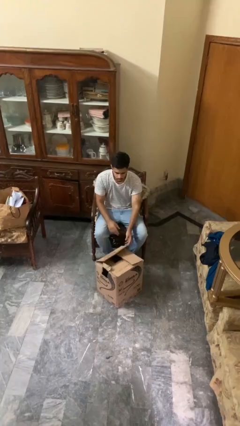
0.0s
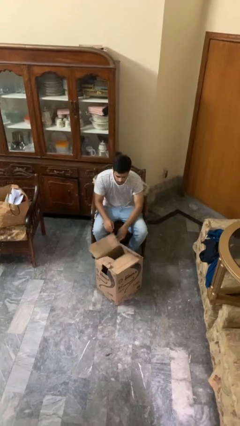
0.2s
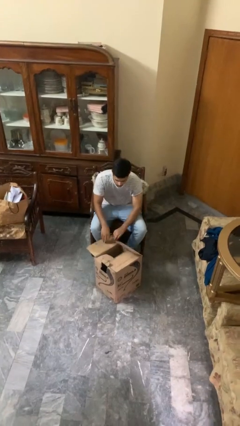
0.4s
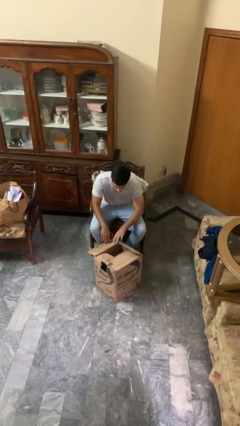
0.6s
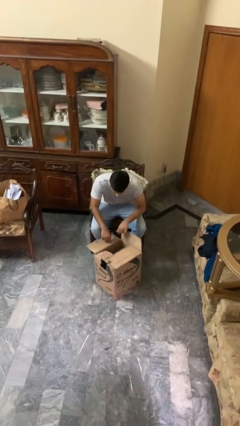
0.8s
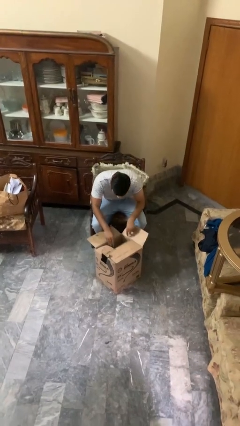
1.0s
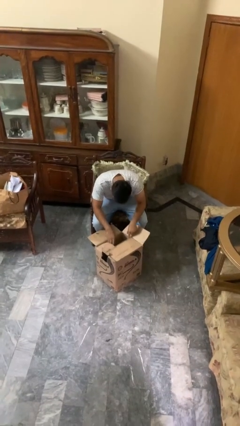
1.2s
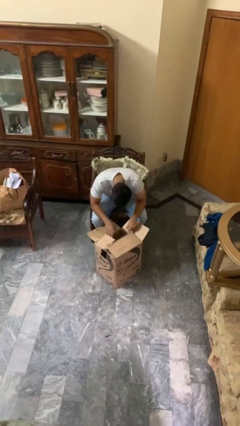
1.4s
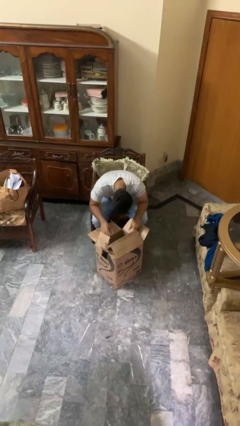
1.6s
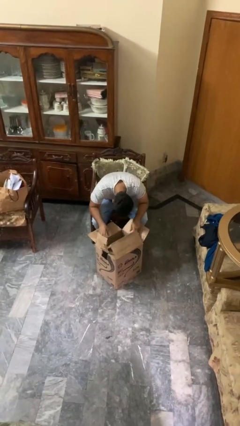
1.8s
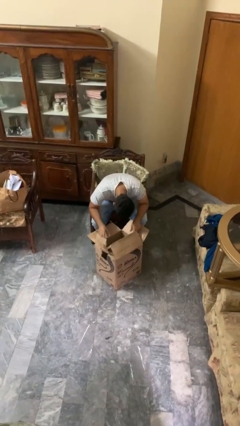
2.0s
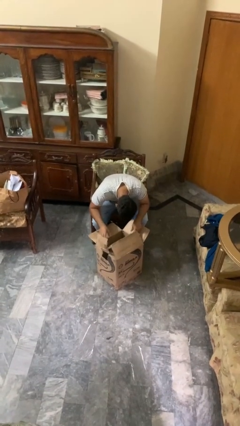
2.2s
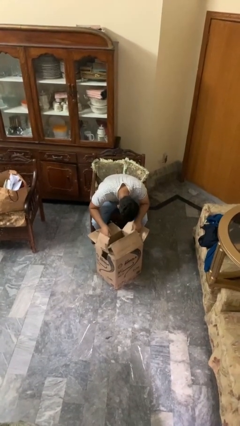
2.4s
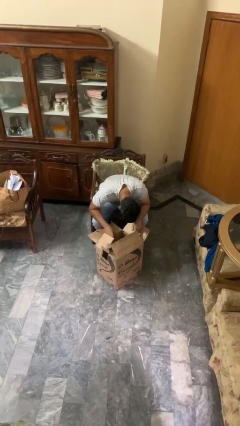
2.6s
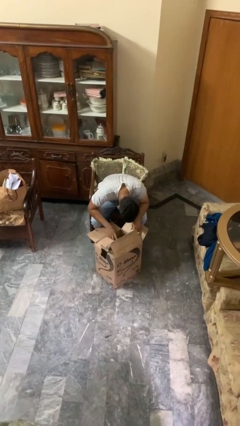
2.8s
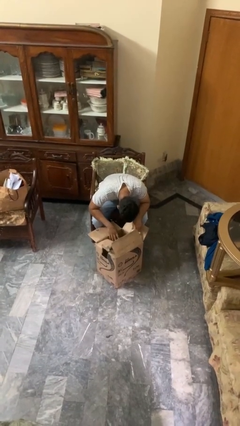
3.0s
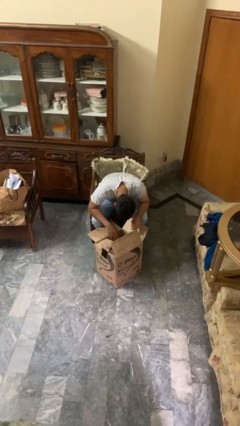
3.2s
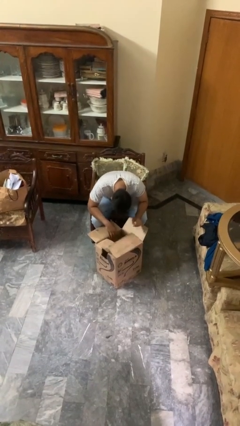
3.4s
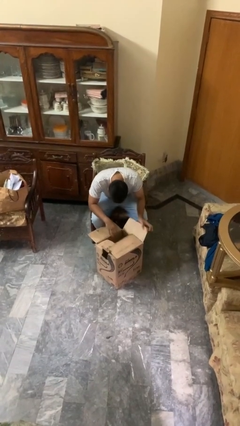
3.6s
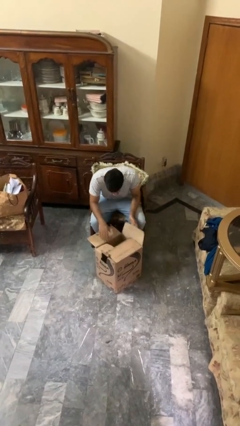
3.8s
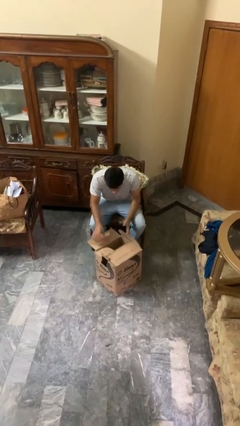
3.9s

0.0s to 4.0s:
person searches in box

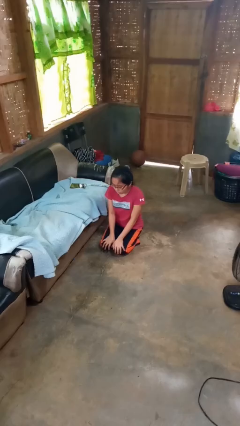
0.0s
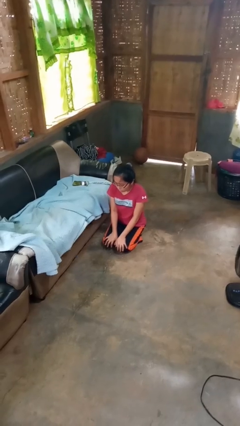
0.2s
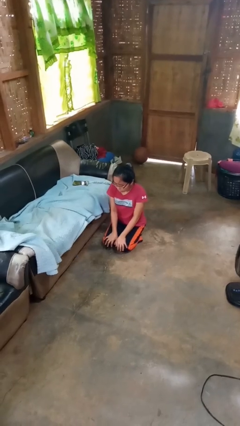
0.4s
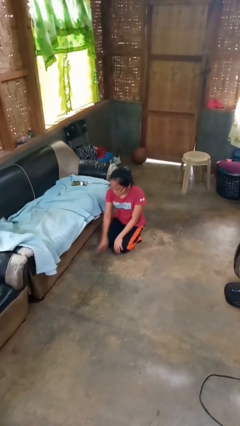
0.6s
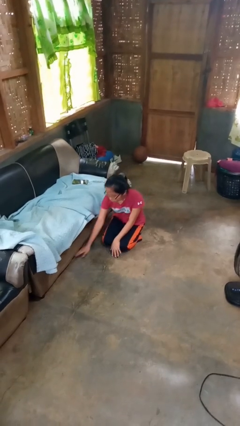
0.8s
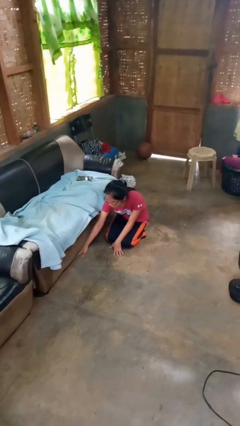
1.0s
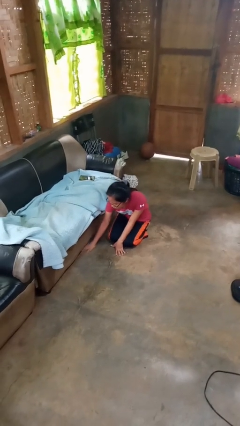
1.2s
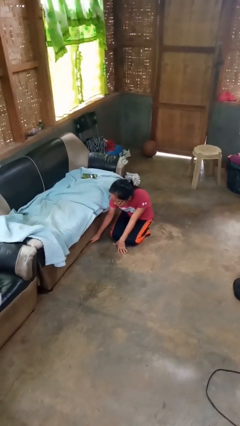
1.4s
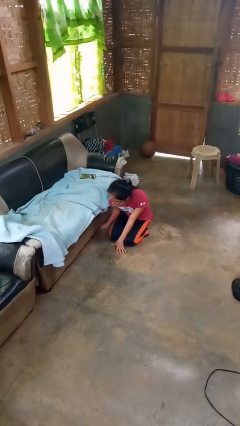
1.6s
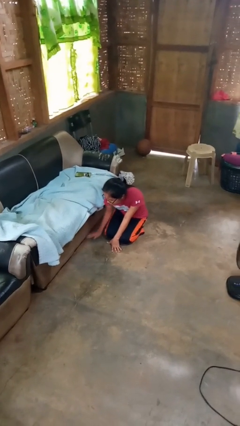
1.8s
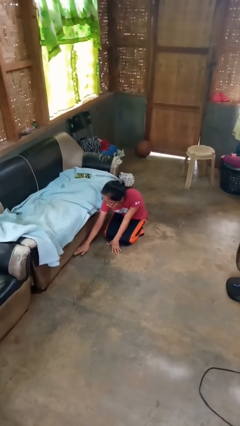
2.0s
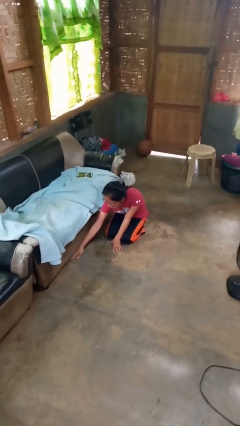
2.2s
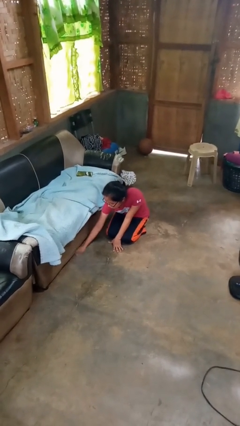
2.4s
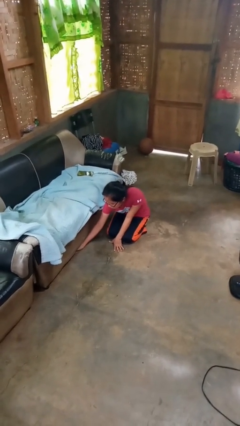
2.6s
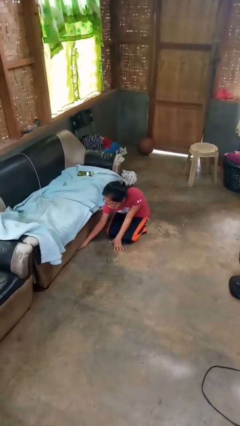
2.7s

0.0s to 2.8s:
person searches under couch

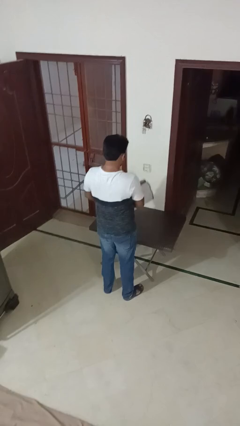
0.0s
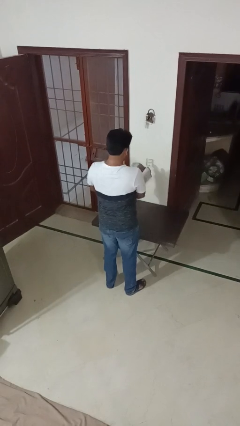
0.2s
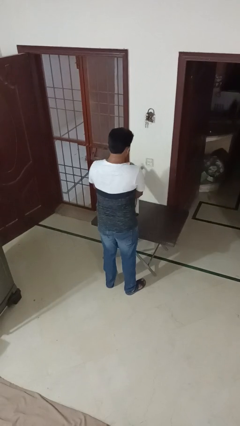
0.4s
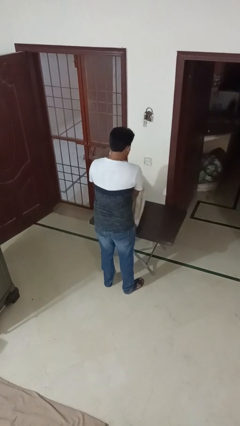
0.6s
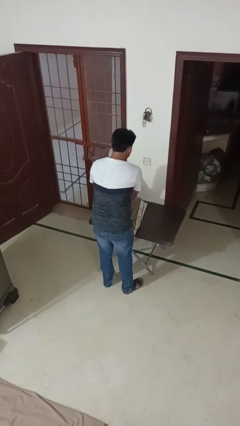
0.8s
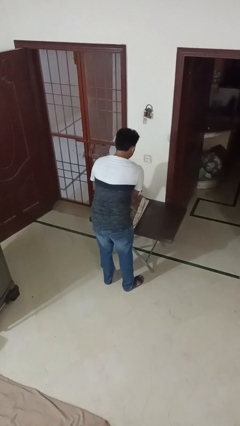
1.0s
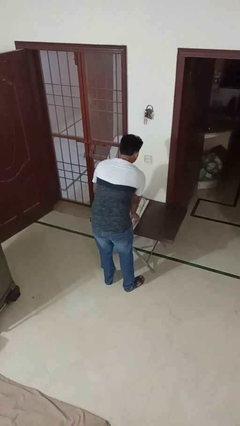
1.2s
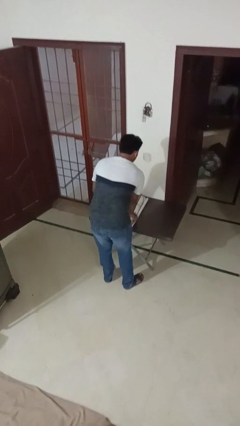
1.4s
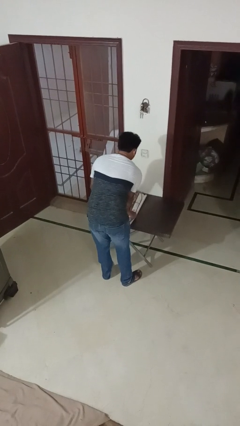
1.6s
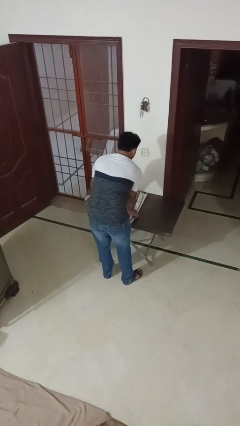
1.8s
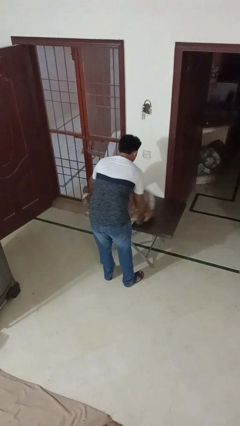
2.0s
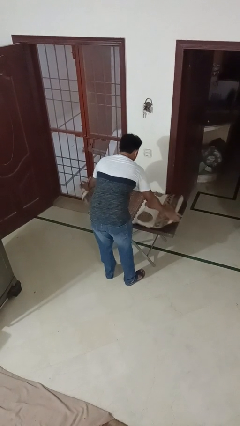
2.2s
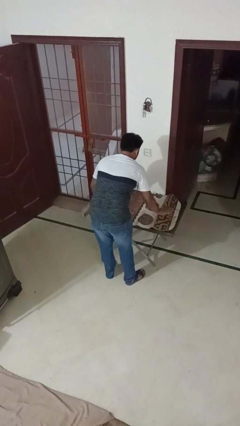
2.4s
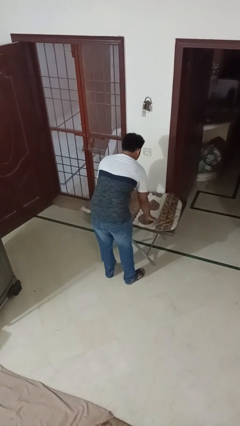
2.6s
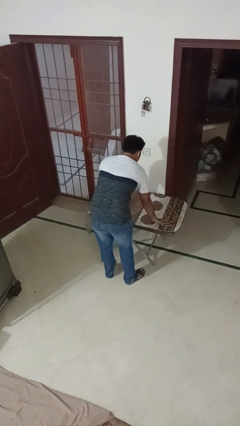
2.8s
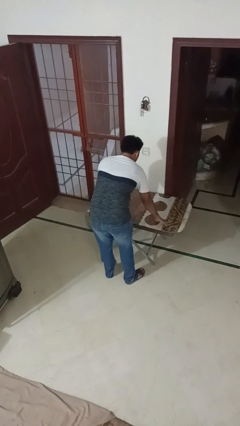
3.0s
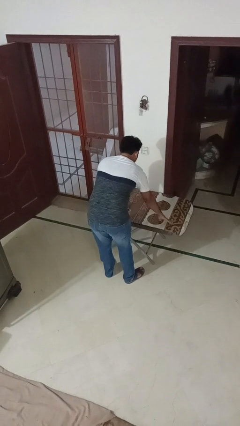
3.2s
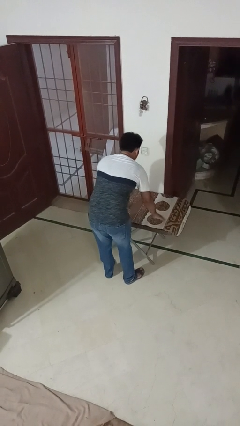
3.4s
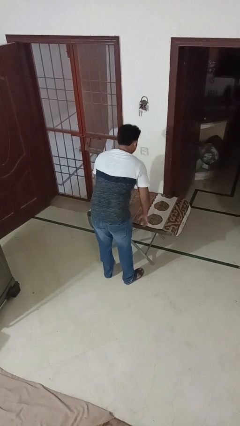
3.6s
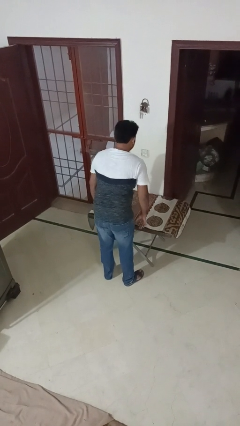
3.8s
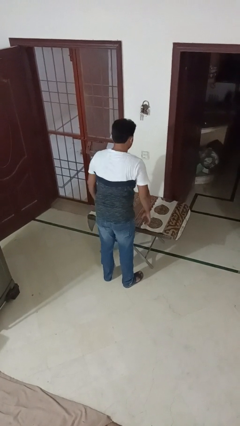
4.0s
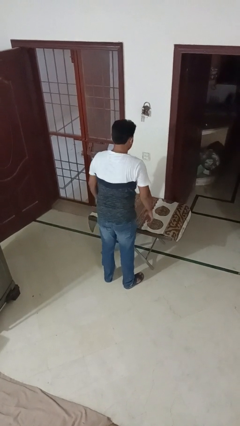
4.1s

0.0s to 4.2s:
person spreads tablecloth

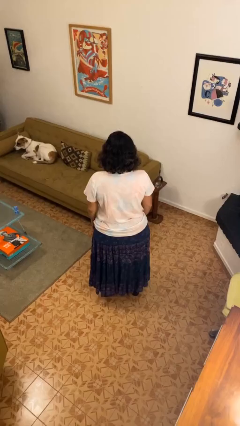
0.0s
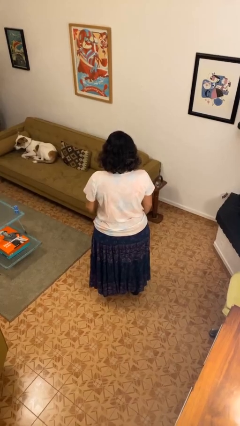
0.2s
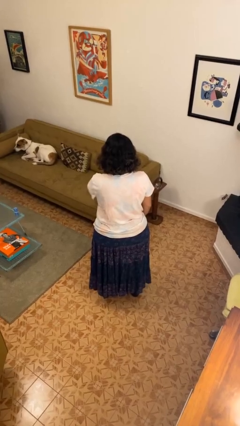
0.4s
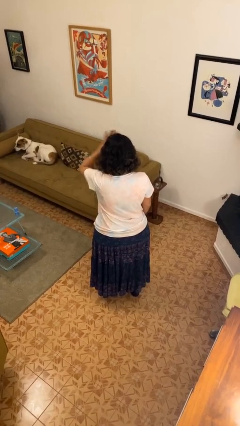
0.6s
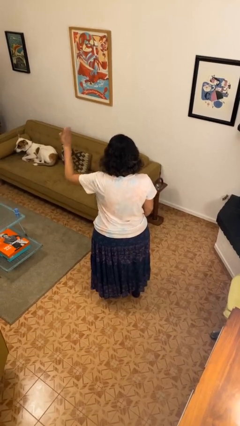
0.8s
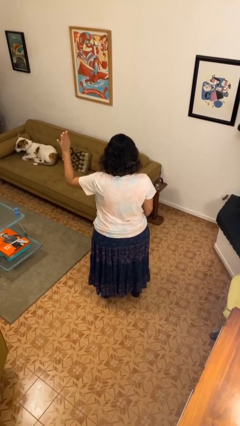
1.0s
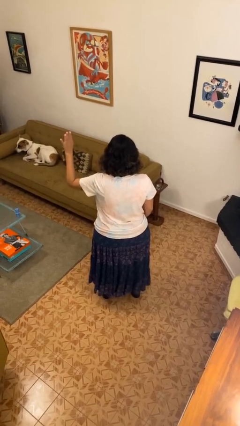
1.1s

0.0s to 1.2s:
person gestures swipe left

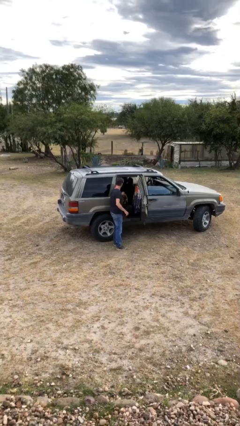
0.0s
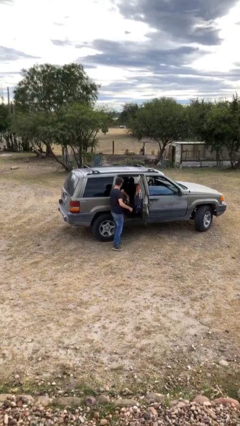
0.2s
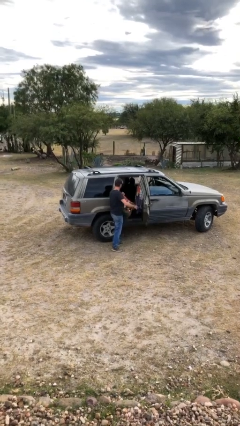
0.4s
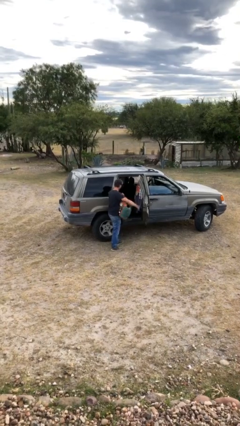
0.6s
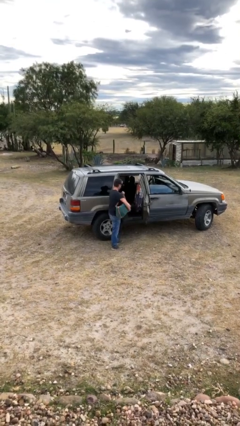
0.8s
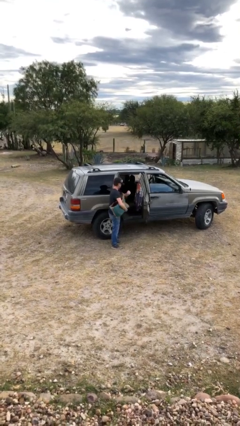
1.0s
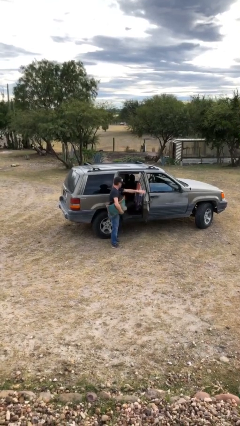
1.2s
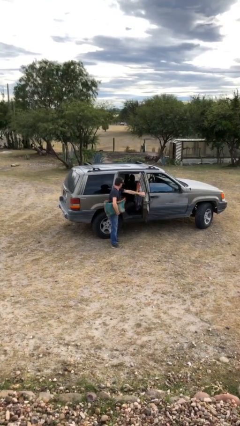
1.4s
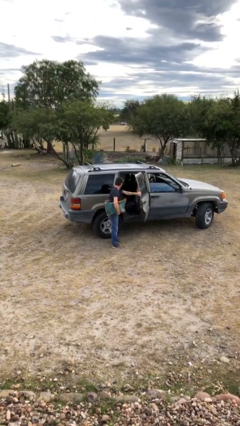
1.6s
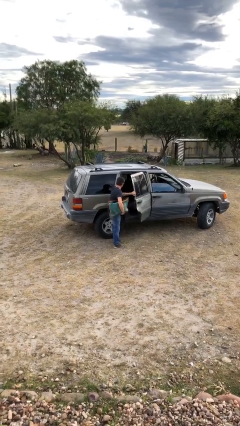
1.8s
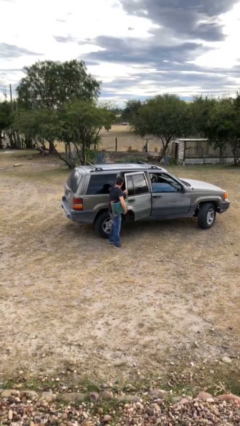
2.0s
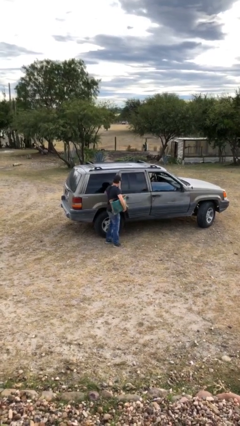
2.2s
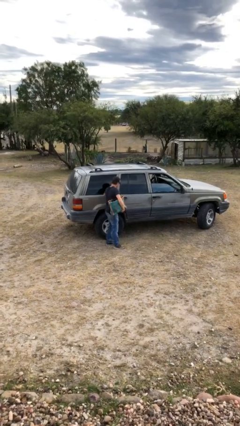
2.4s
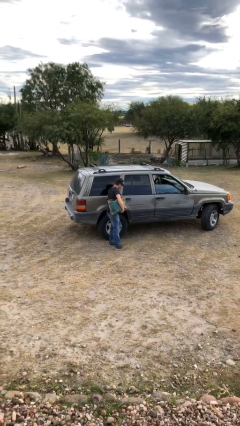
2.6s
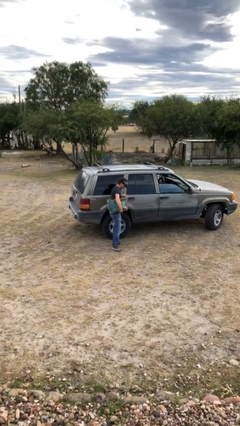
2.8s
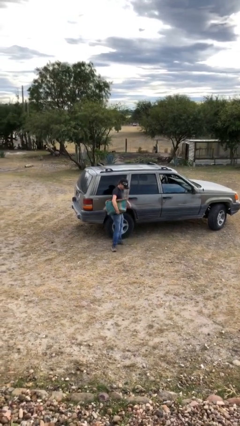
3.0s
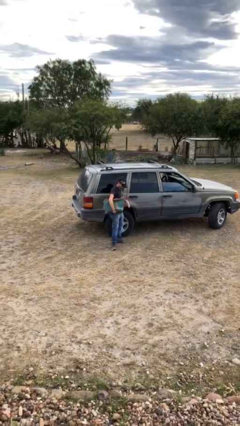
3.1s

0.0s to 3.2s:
person closes car door

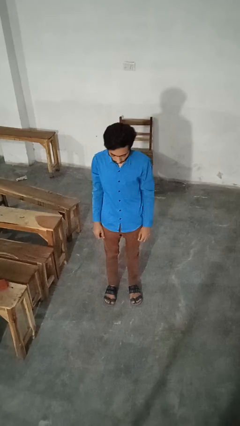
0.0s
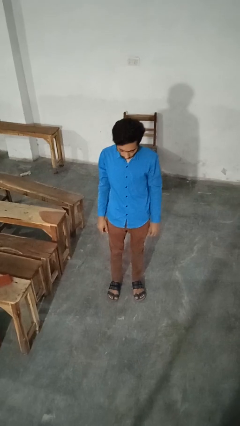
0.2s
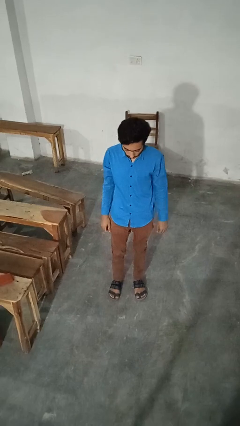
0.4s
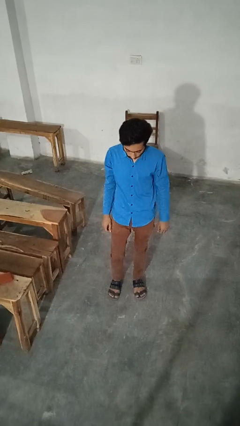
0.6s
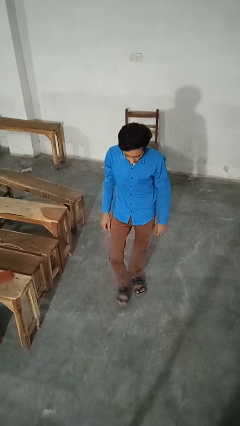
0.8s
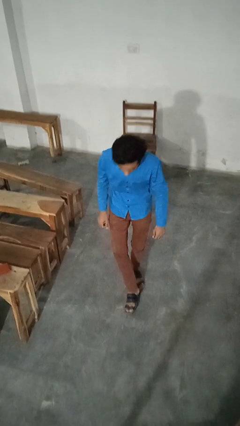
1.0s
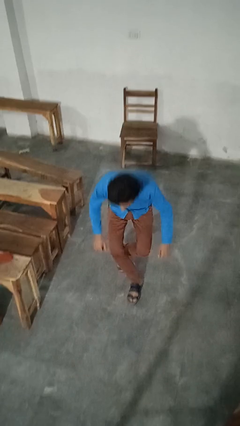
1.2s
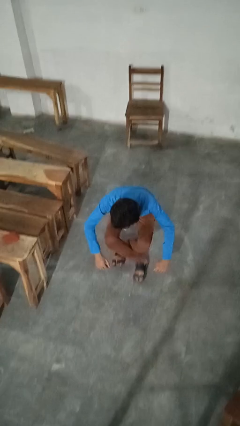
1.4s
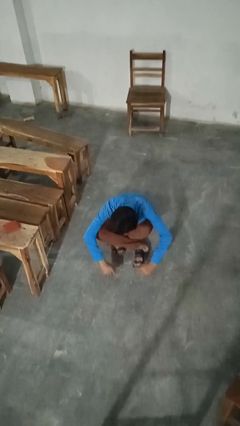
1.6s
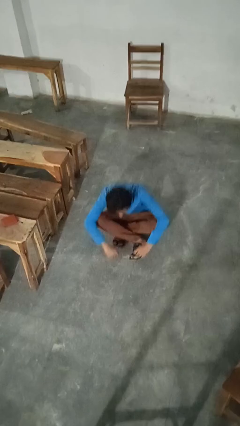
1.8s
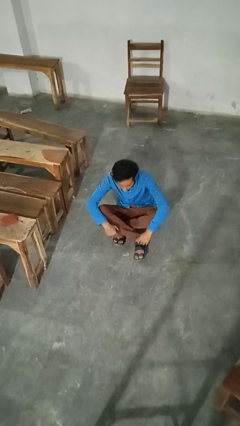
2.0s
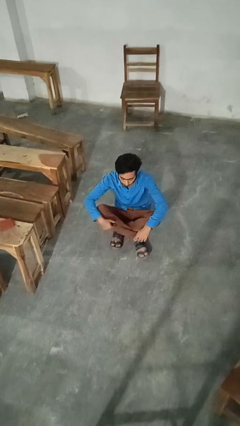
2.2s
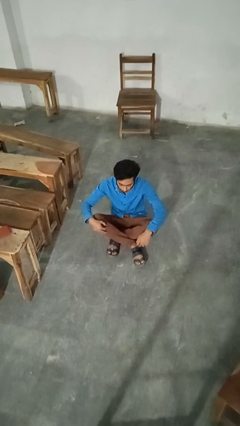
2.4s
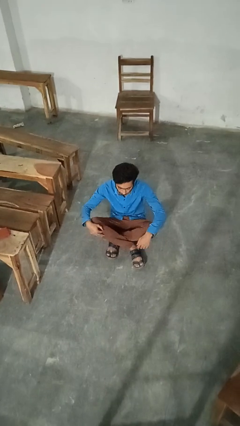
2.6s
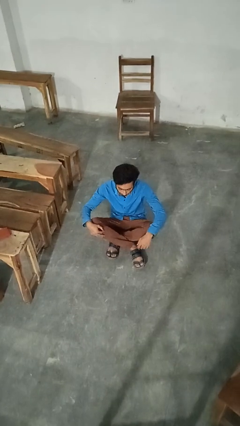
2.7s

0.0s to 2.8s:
person sits crisscross
